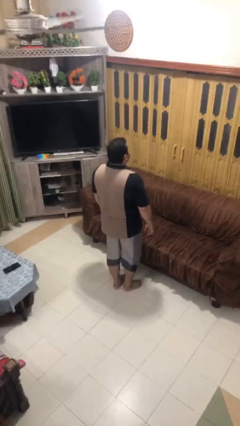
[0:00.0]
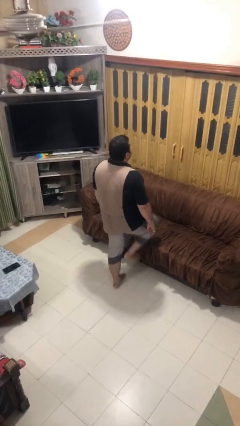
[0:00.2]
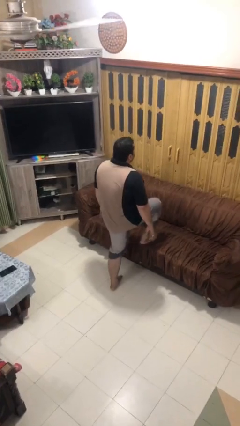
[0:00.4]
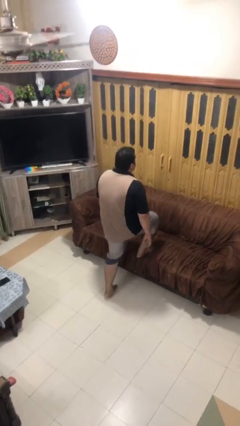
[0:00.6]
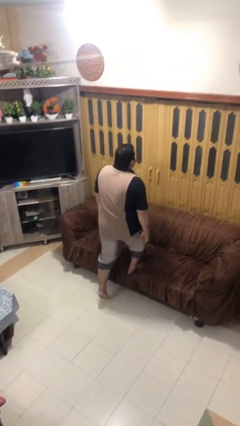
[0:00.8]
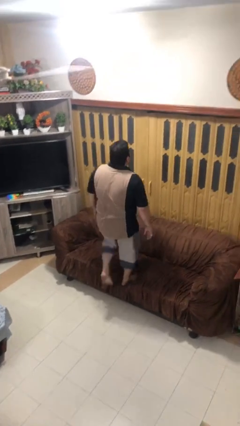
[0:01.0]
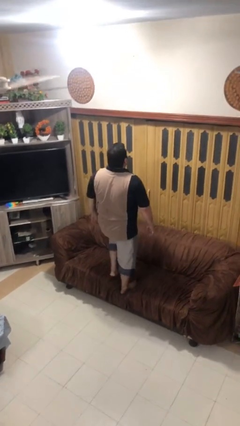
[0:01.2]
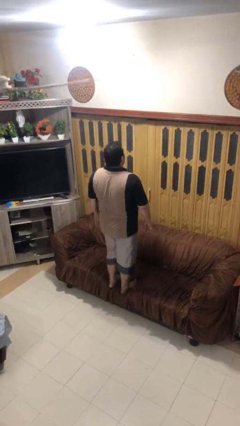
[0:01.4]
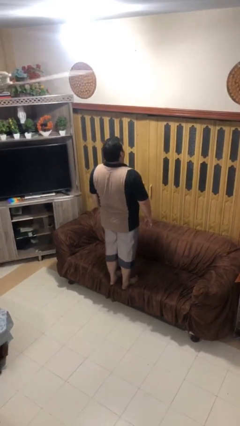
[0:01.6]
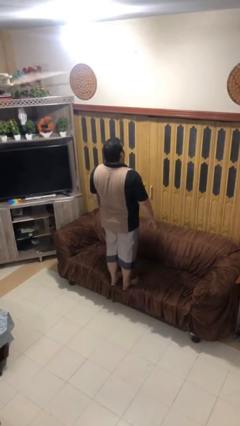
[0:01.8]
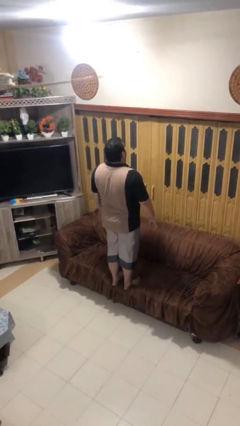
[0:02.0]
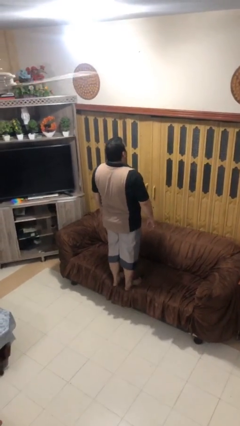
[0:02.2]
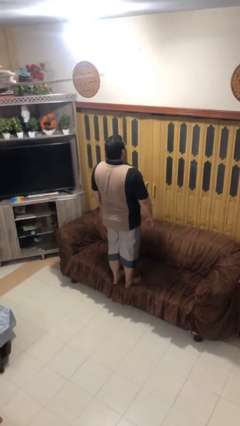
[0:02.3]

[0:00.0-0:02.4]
person climbs on couch

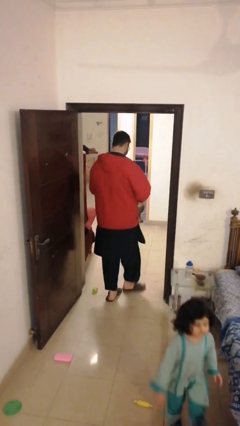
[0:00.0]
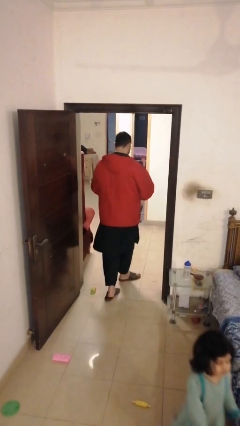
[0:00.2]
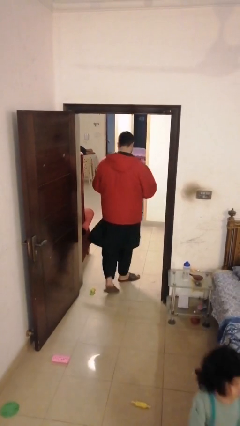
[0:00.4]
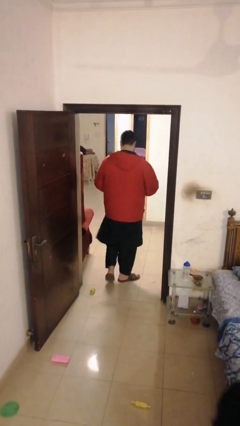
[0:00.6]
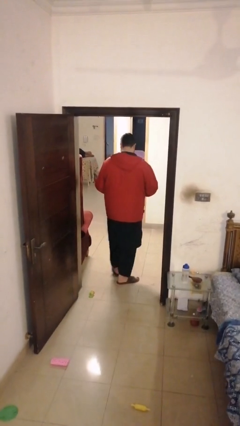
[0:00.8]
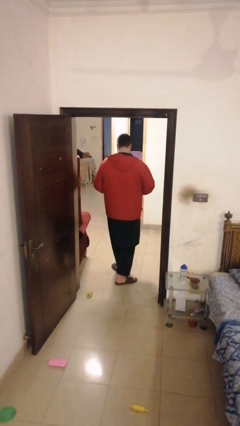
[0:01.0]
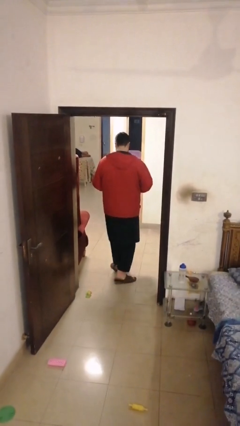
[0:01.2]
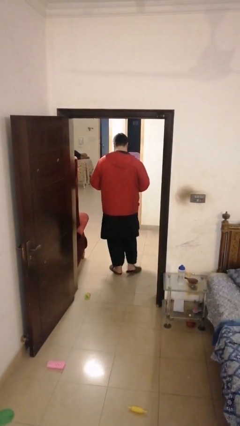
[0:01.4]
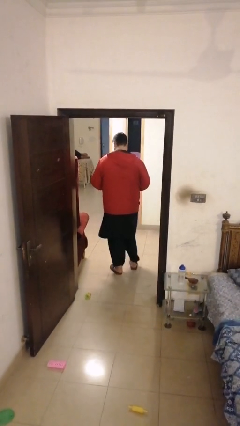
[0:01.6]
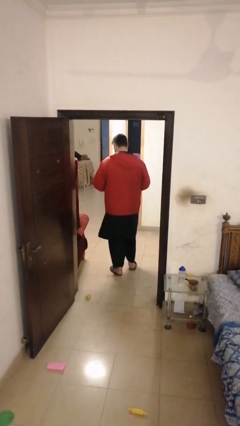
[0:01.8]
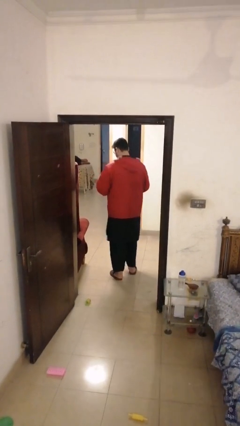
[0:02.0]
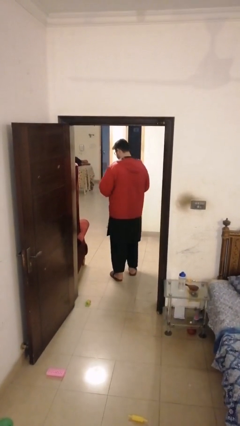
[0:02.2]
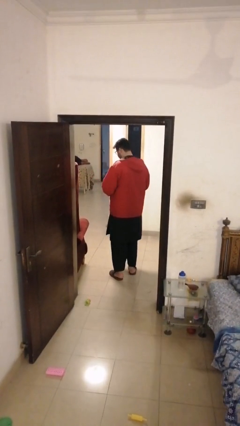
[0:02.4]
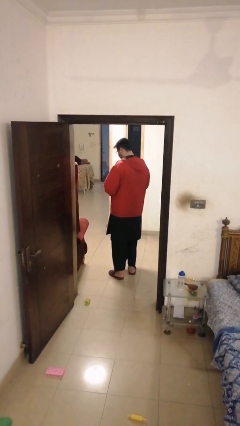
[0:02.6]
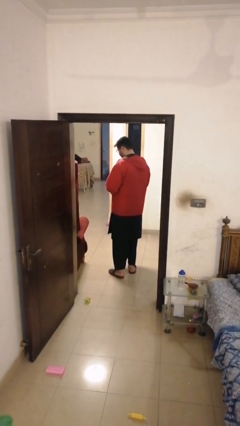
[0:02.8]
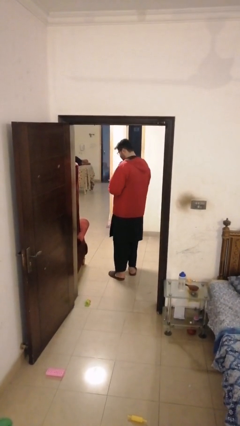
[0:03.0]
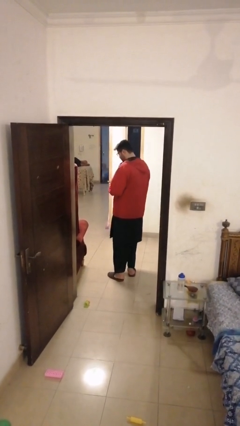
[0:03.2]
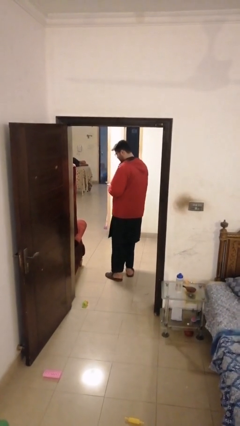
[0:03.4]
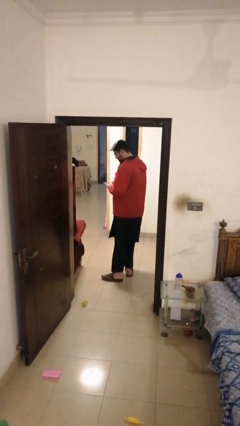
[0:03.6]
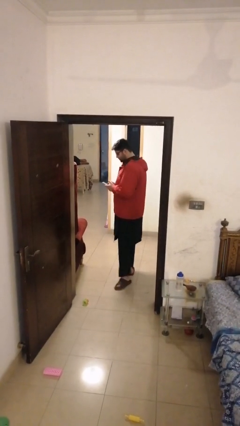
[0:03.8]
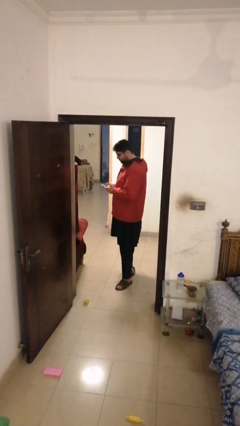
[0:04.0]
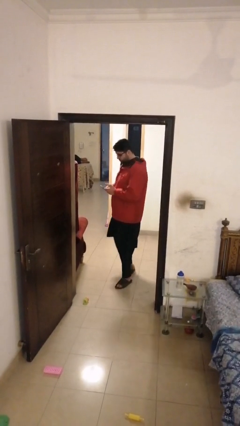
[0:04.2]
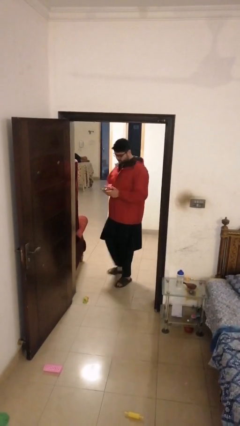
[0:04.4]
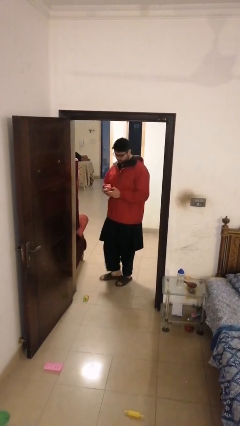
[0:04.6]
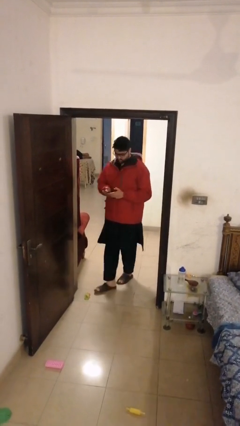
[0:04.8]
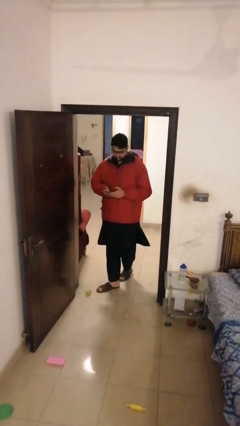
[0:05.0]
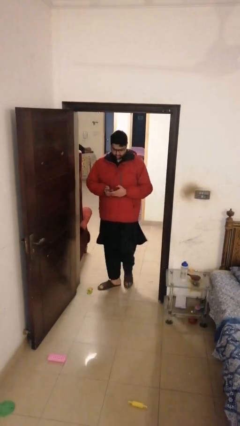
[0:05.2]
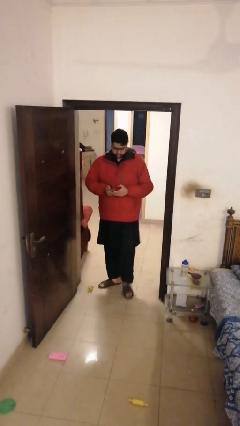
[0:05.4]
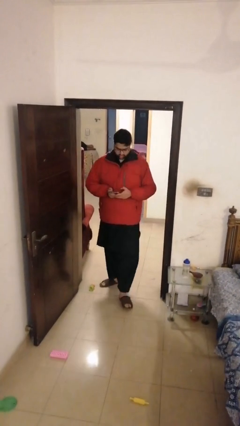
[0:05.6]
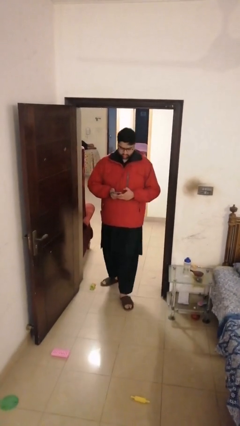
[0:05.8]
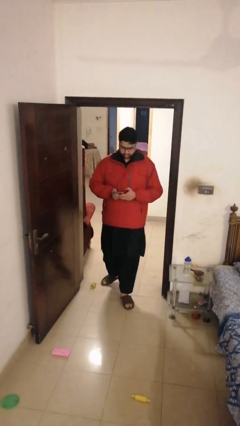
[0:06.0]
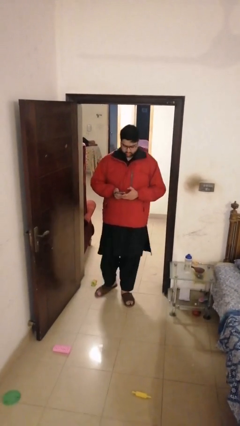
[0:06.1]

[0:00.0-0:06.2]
person exits scene through structure

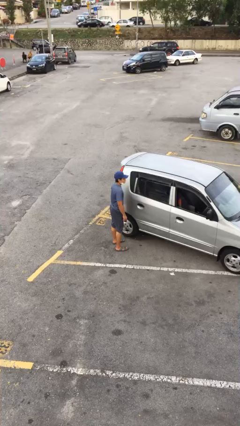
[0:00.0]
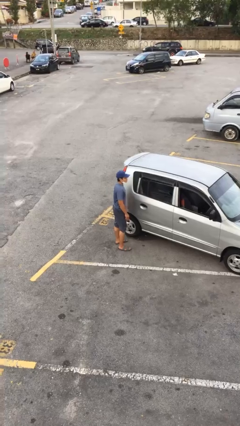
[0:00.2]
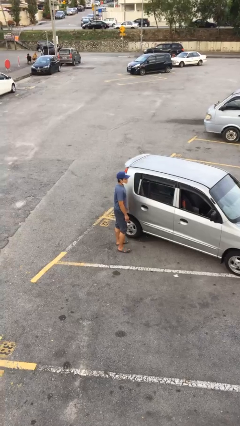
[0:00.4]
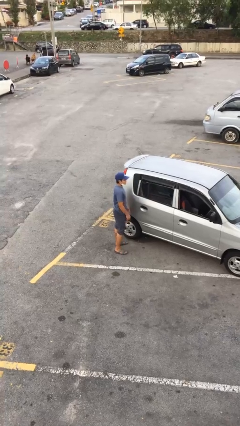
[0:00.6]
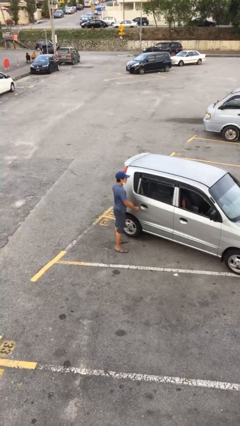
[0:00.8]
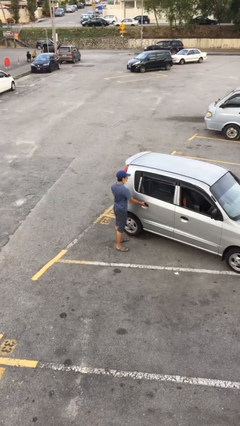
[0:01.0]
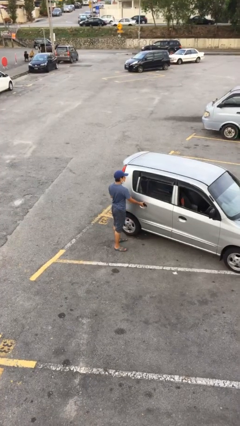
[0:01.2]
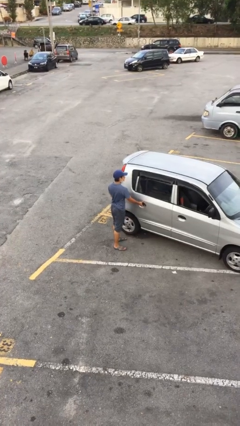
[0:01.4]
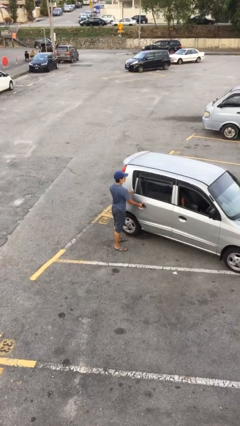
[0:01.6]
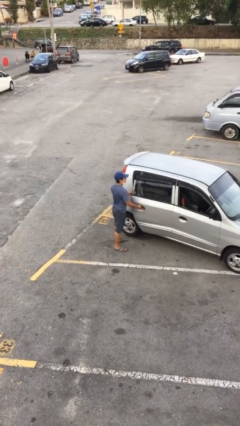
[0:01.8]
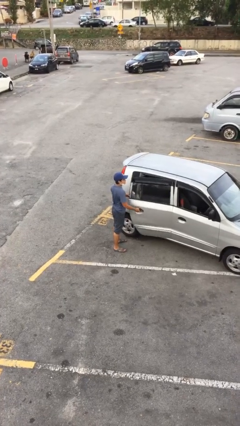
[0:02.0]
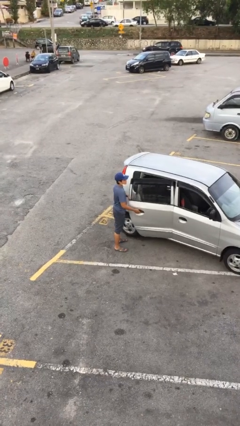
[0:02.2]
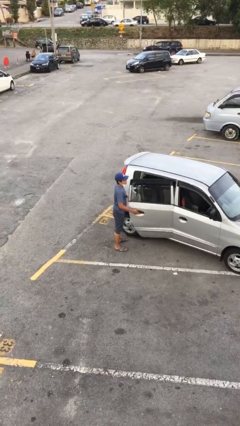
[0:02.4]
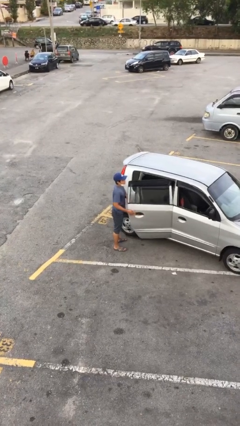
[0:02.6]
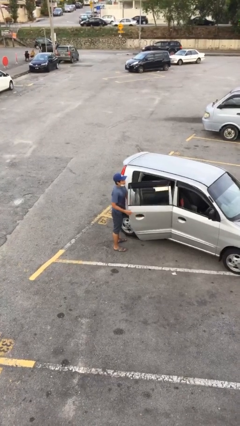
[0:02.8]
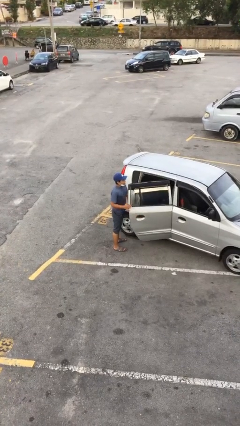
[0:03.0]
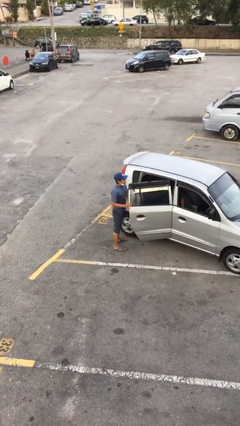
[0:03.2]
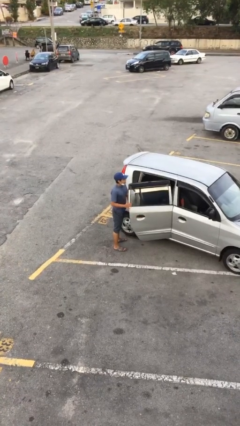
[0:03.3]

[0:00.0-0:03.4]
person opens car door

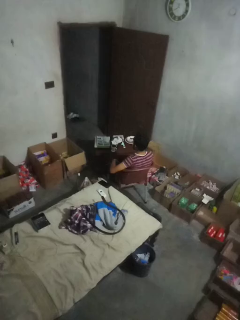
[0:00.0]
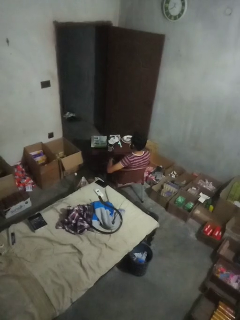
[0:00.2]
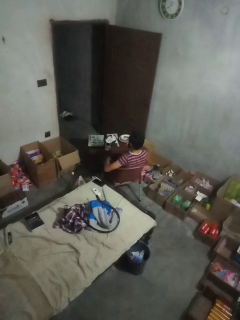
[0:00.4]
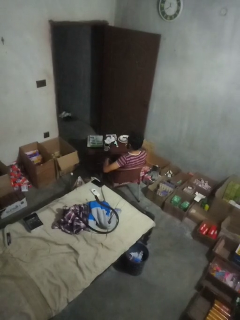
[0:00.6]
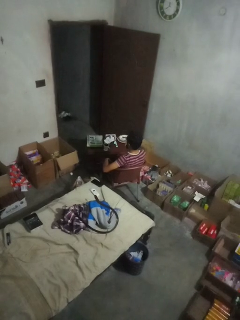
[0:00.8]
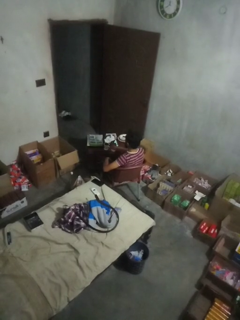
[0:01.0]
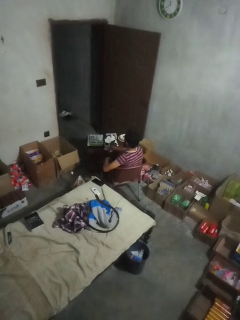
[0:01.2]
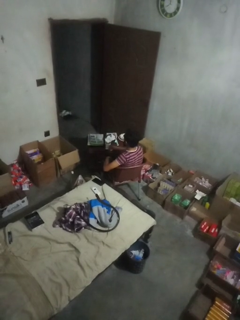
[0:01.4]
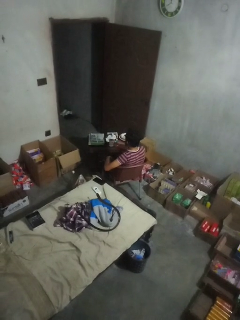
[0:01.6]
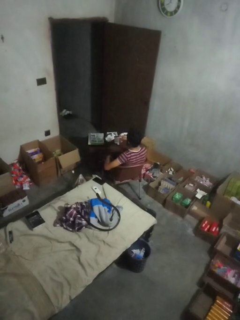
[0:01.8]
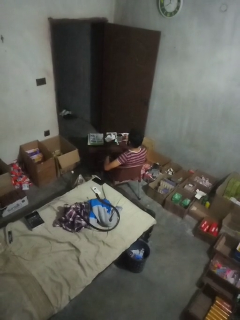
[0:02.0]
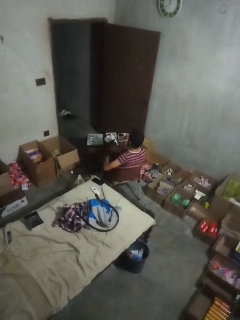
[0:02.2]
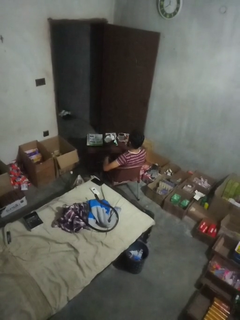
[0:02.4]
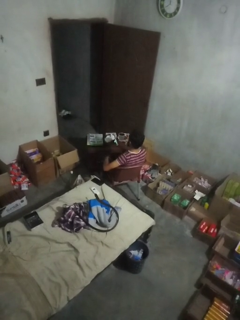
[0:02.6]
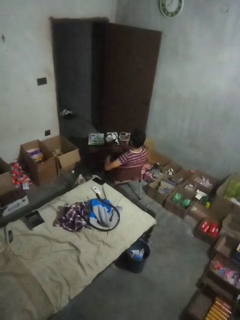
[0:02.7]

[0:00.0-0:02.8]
person picks up object from table

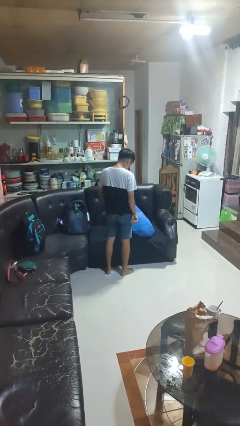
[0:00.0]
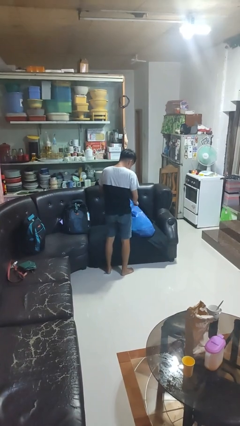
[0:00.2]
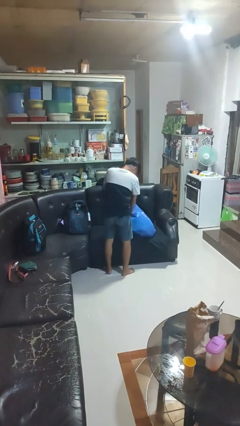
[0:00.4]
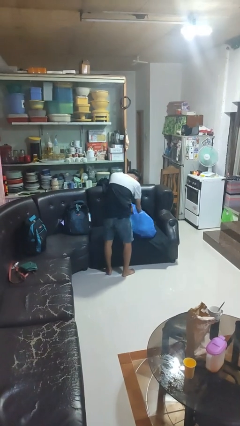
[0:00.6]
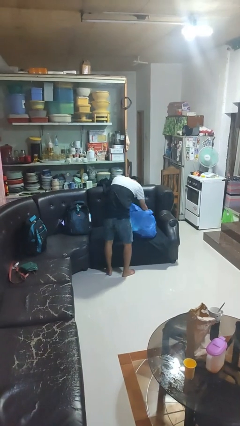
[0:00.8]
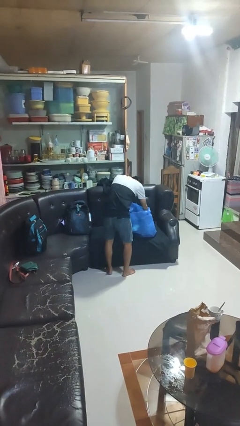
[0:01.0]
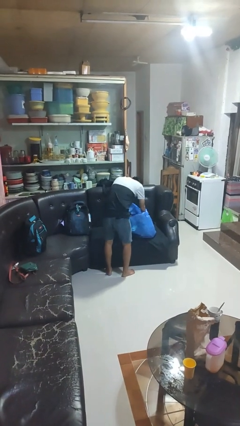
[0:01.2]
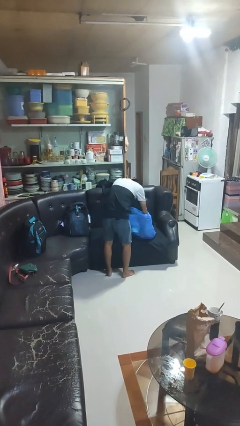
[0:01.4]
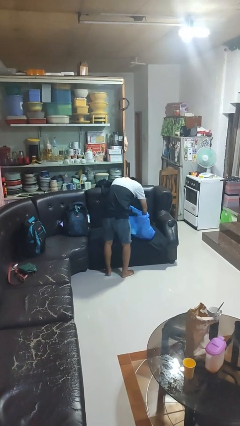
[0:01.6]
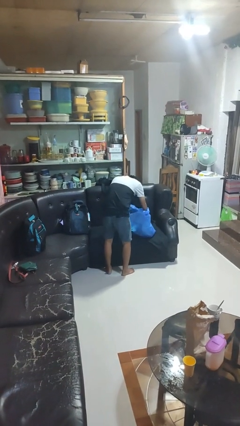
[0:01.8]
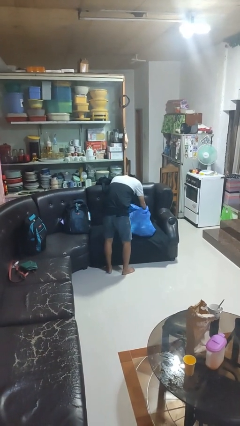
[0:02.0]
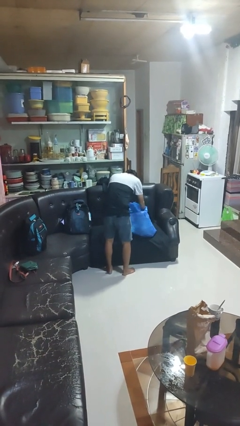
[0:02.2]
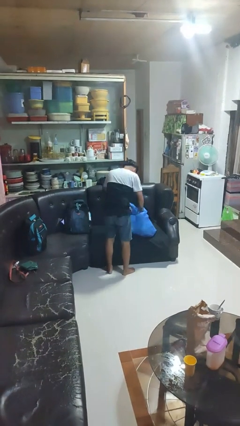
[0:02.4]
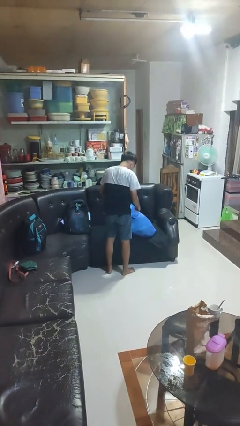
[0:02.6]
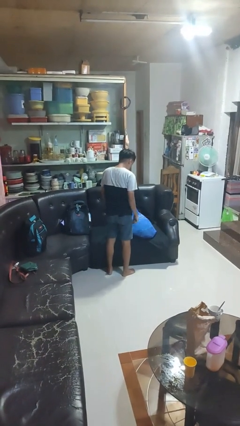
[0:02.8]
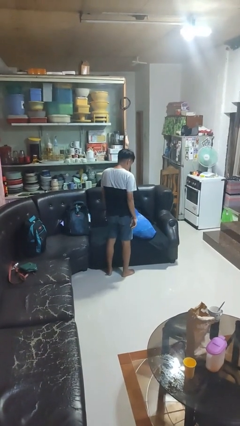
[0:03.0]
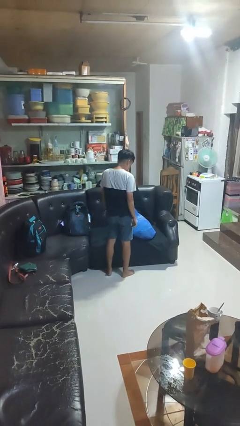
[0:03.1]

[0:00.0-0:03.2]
person searches in bag

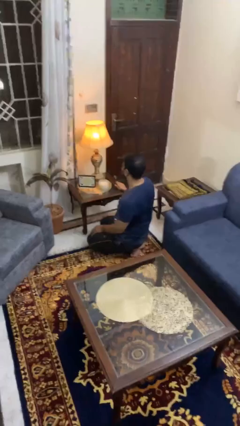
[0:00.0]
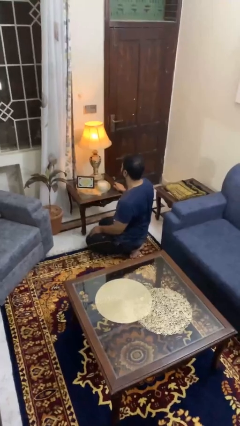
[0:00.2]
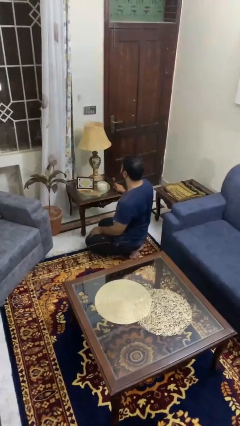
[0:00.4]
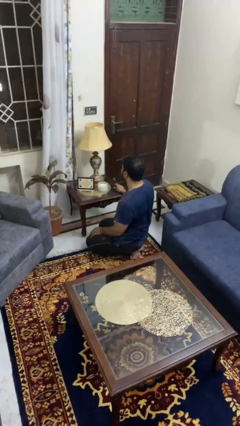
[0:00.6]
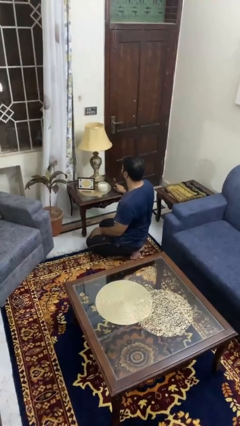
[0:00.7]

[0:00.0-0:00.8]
person turns off lamp
